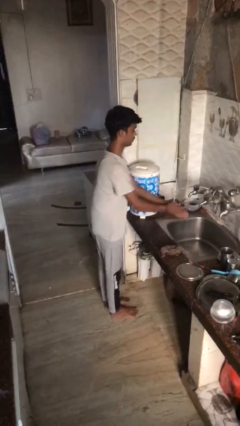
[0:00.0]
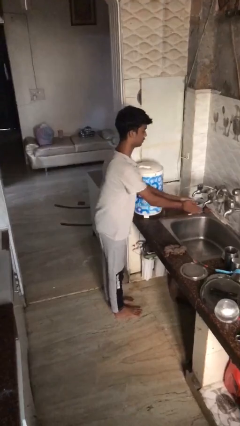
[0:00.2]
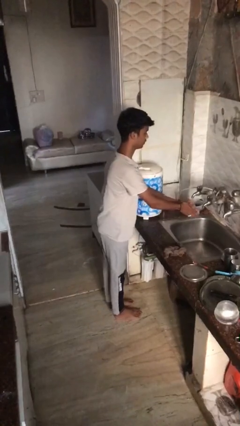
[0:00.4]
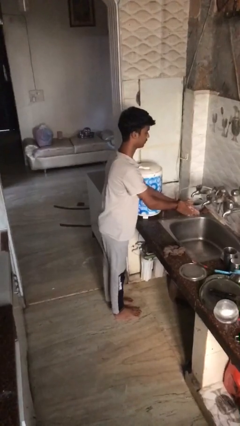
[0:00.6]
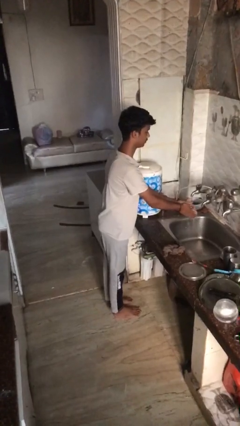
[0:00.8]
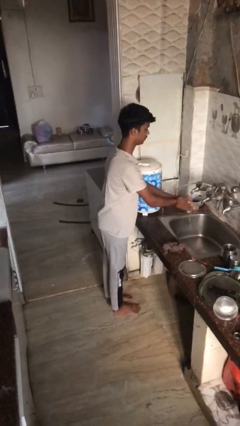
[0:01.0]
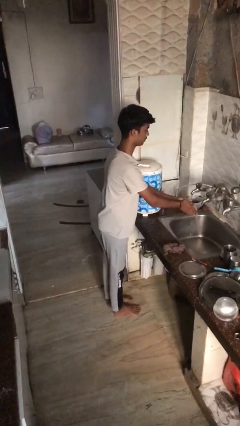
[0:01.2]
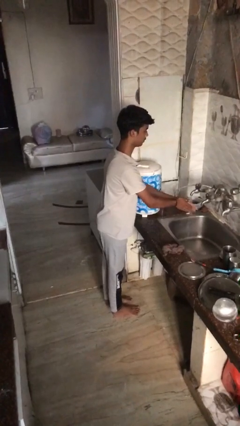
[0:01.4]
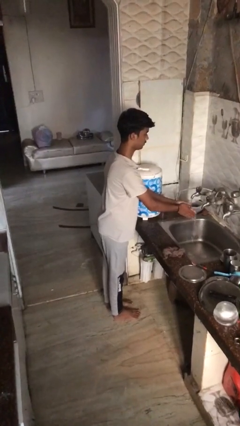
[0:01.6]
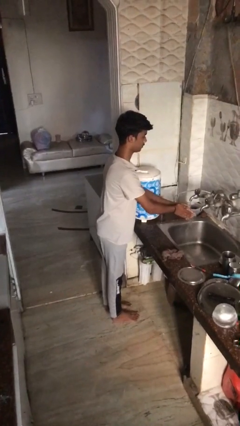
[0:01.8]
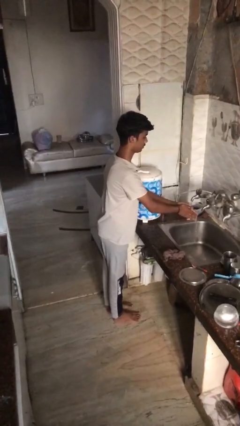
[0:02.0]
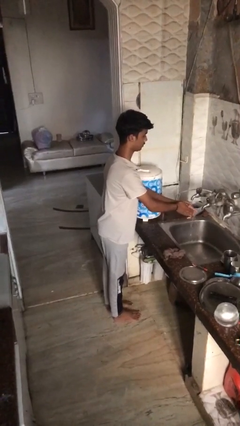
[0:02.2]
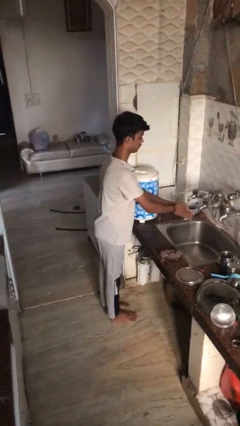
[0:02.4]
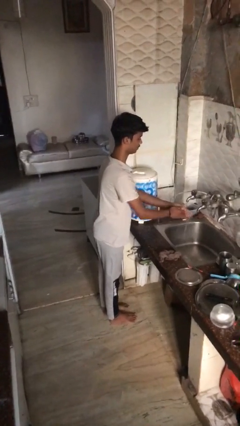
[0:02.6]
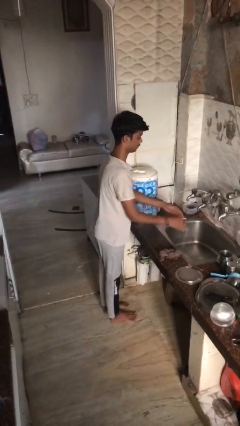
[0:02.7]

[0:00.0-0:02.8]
person washes hands

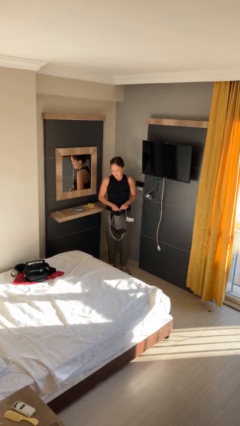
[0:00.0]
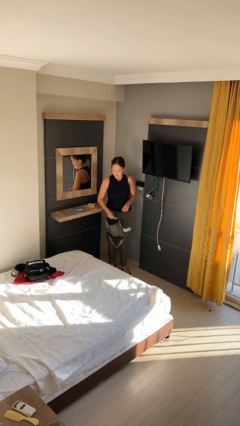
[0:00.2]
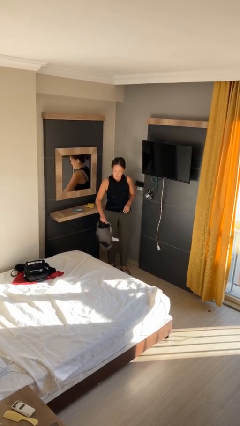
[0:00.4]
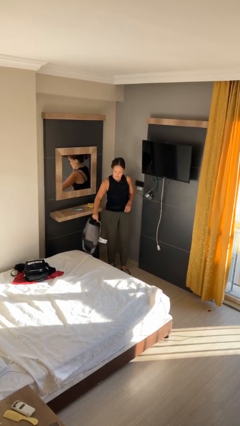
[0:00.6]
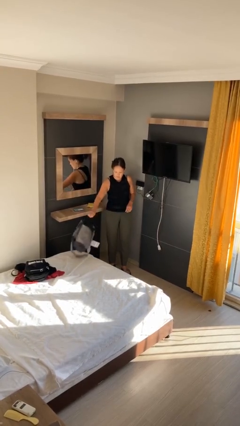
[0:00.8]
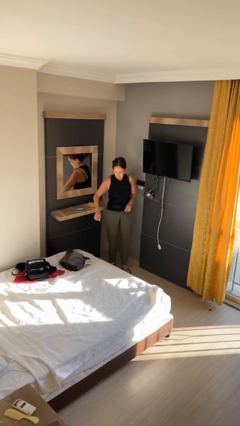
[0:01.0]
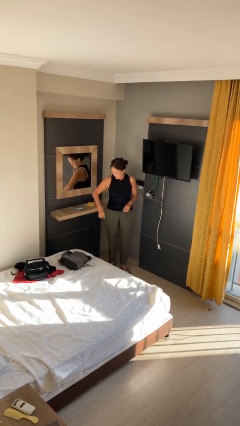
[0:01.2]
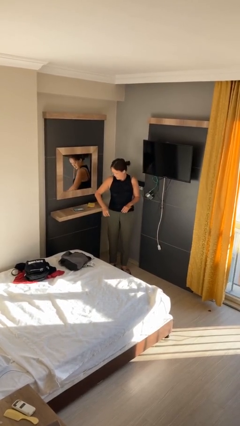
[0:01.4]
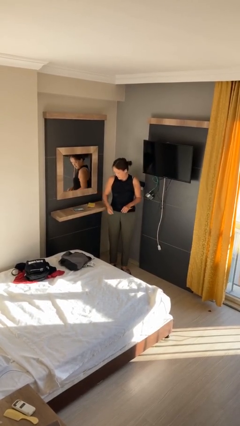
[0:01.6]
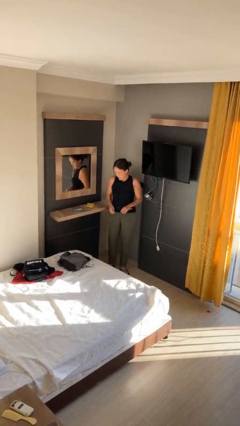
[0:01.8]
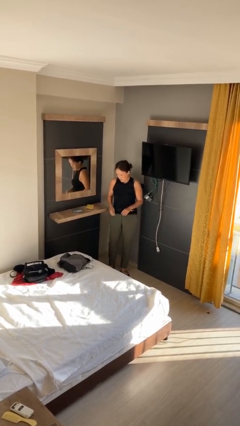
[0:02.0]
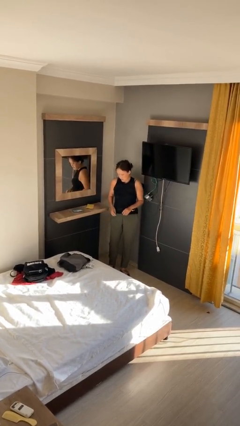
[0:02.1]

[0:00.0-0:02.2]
person throws object on bed

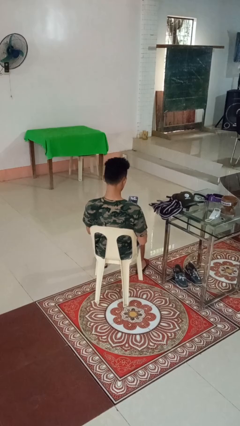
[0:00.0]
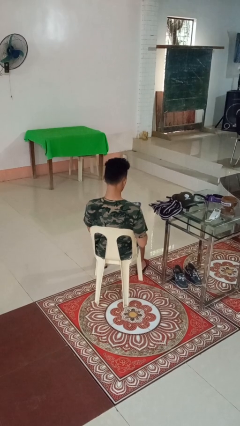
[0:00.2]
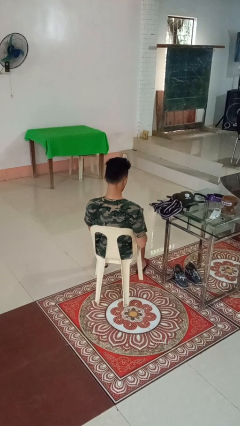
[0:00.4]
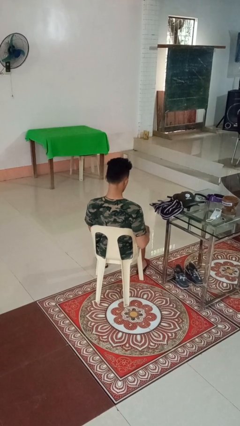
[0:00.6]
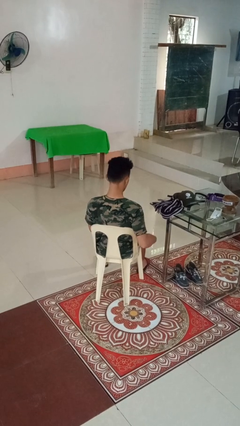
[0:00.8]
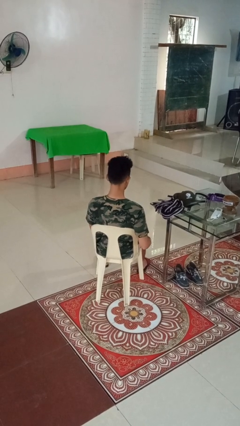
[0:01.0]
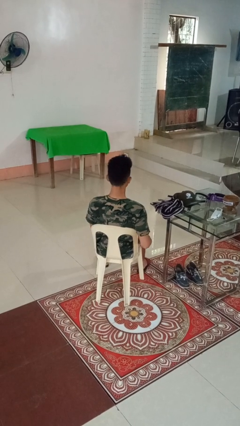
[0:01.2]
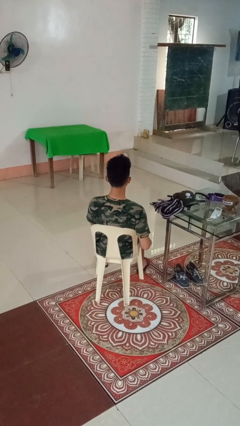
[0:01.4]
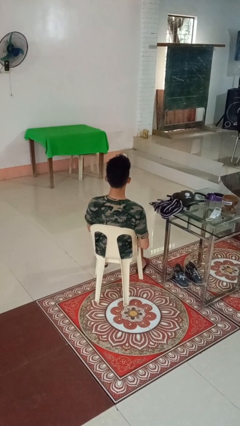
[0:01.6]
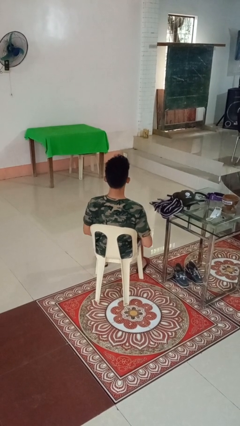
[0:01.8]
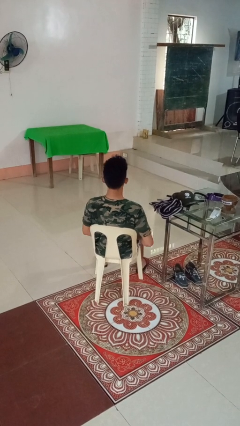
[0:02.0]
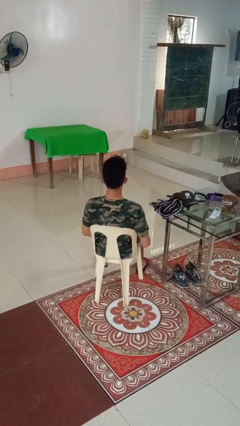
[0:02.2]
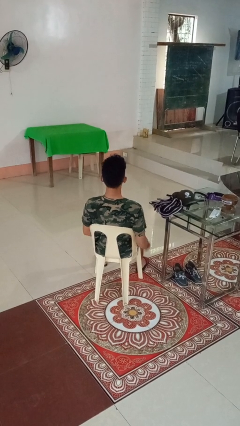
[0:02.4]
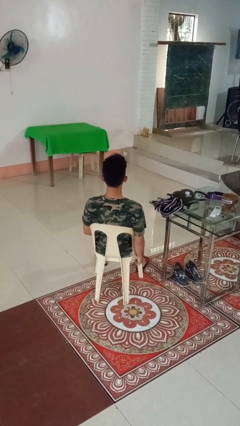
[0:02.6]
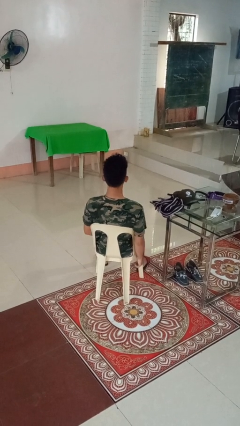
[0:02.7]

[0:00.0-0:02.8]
person puts phone into pocket

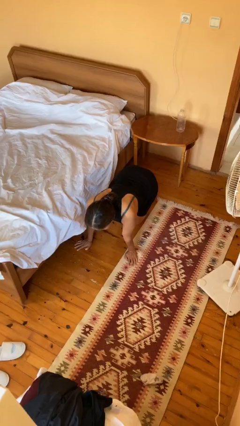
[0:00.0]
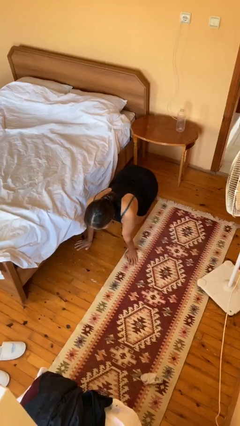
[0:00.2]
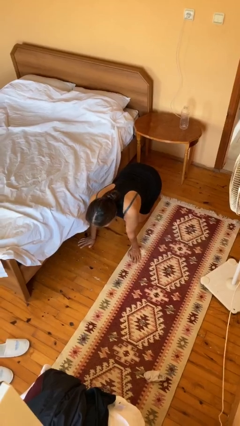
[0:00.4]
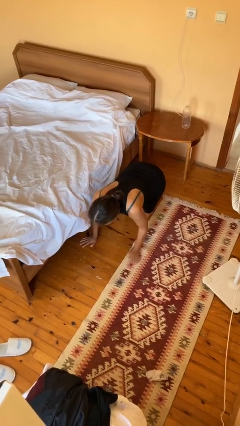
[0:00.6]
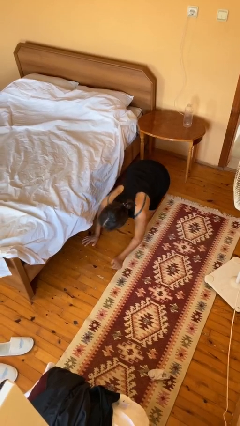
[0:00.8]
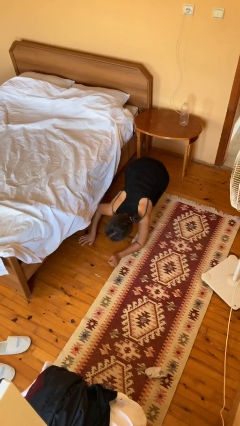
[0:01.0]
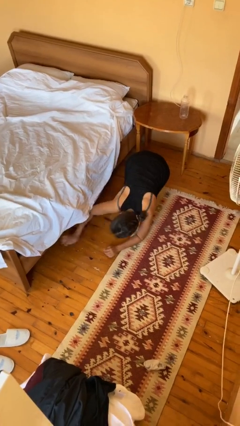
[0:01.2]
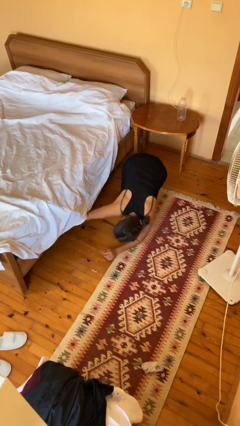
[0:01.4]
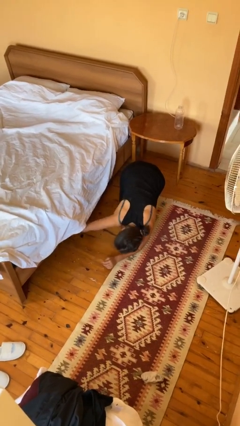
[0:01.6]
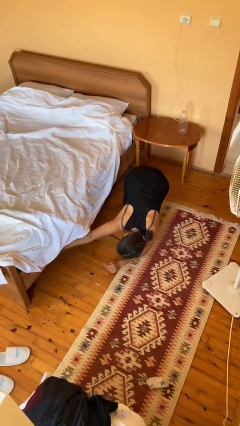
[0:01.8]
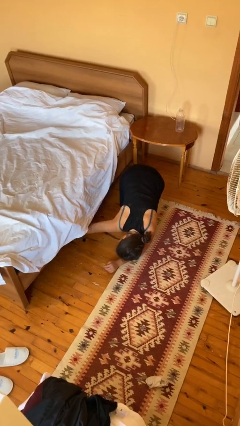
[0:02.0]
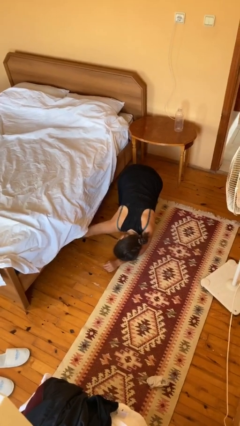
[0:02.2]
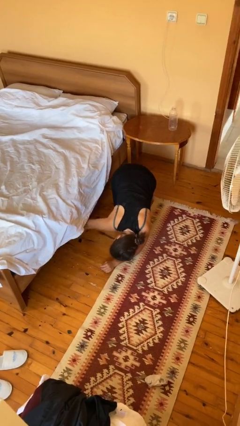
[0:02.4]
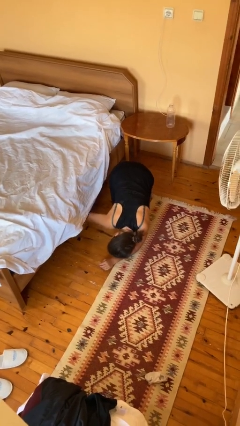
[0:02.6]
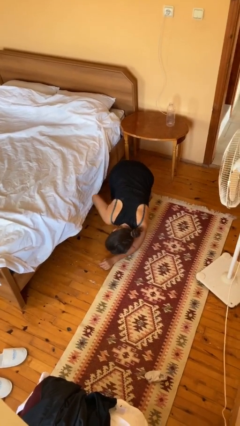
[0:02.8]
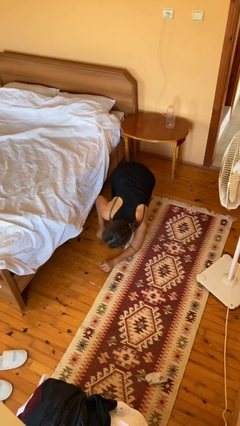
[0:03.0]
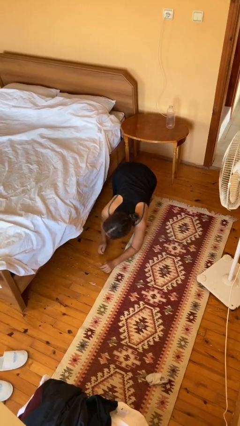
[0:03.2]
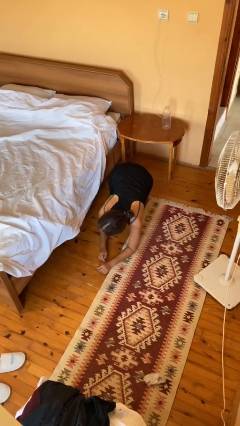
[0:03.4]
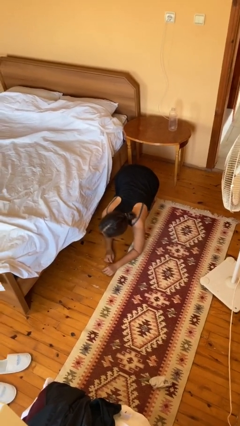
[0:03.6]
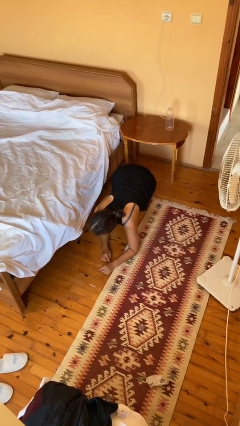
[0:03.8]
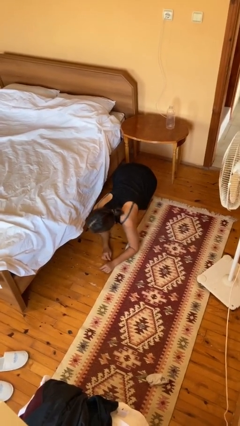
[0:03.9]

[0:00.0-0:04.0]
person searches under bed

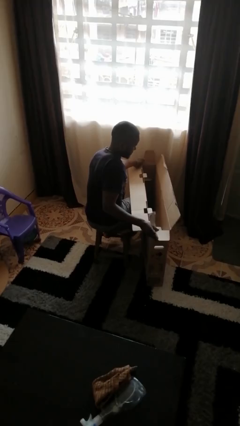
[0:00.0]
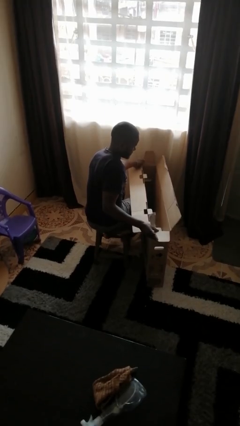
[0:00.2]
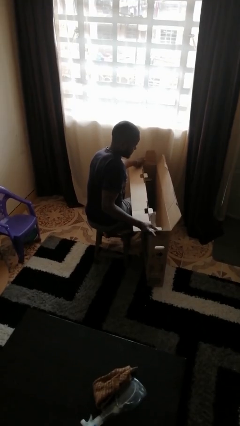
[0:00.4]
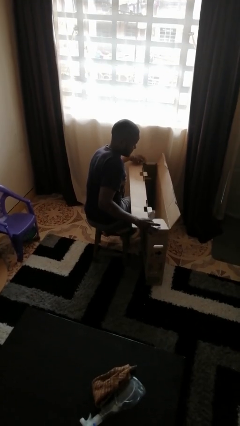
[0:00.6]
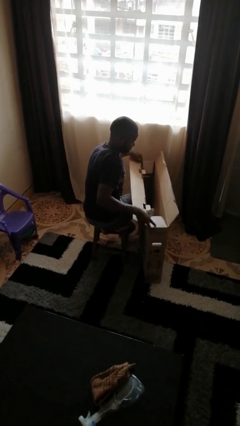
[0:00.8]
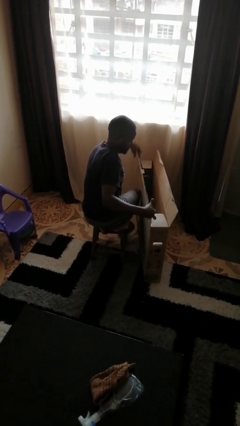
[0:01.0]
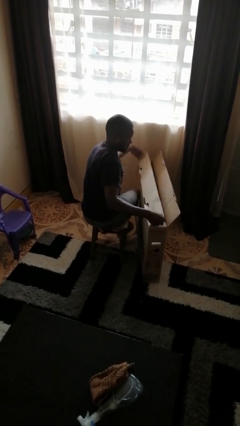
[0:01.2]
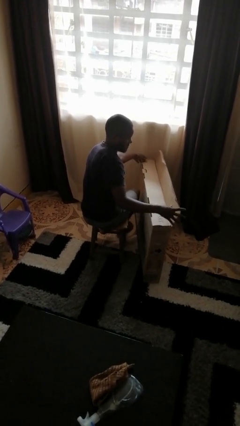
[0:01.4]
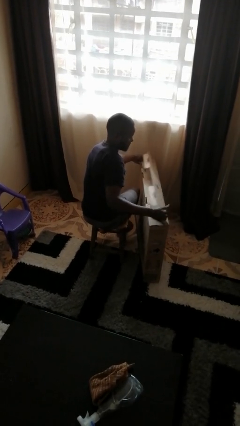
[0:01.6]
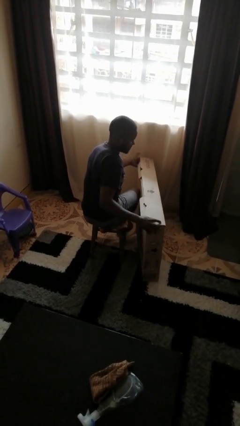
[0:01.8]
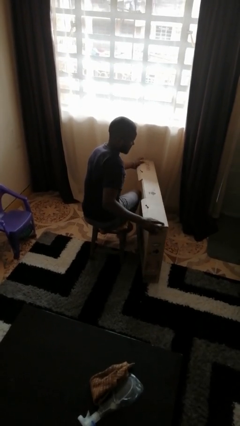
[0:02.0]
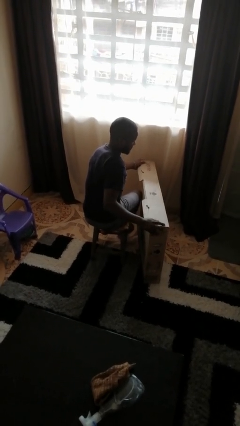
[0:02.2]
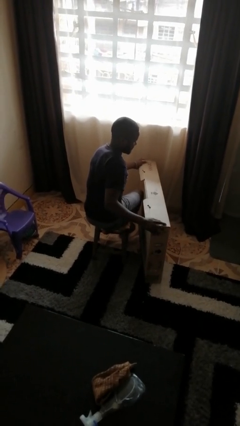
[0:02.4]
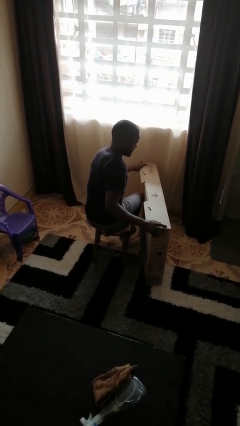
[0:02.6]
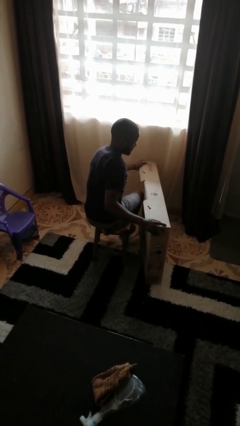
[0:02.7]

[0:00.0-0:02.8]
person closes box

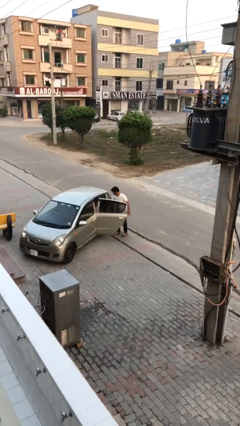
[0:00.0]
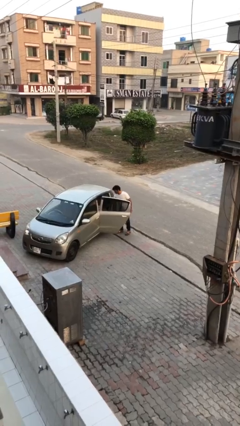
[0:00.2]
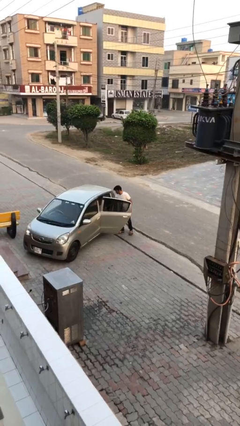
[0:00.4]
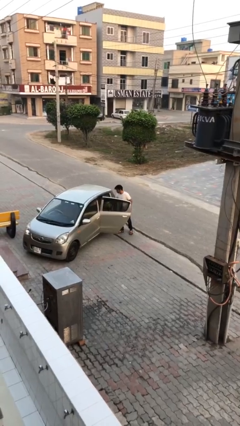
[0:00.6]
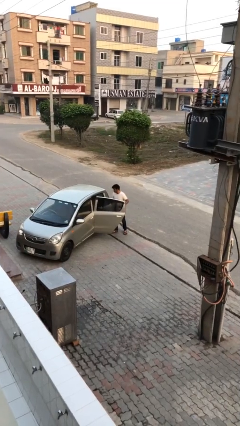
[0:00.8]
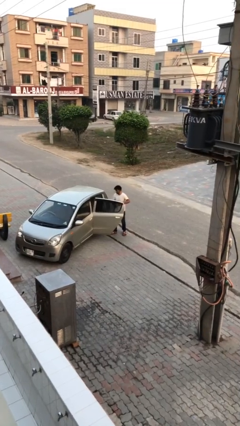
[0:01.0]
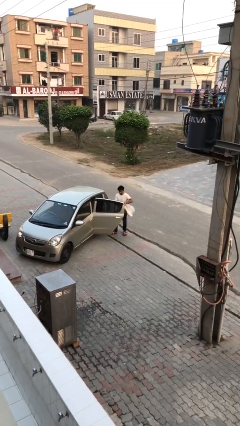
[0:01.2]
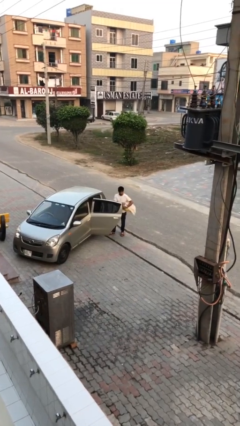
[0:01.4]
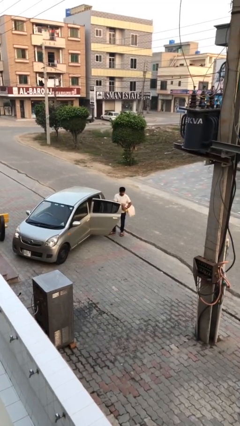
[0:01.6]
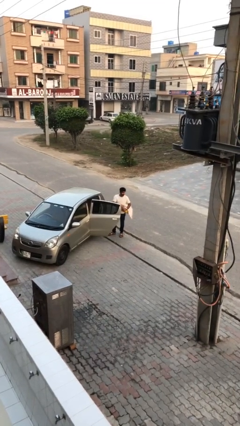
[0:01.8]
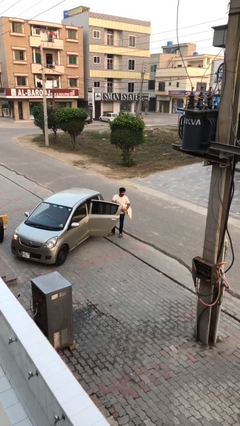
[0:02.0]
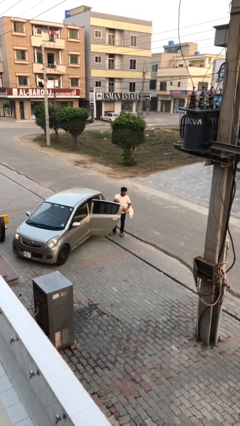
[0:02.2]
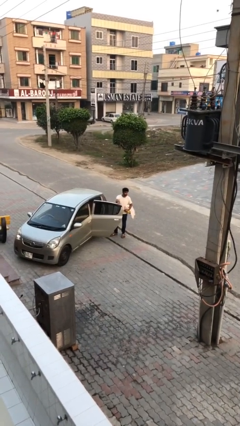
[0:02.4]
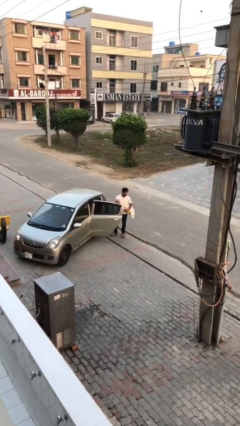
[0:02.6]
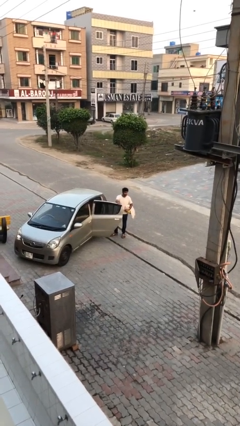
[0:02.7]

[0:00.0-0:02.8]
person unloads car
